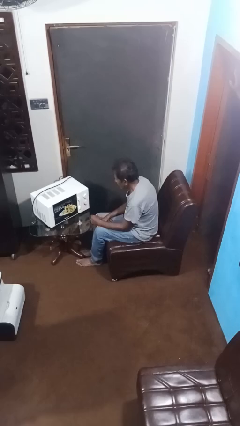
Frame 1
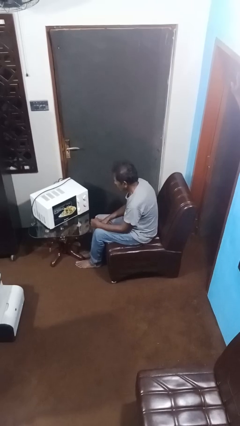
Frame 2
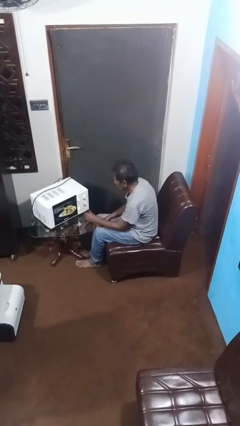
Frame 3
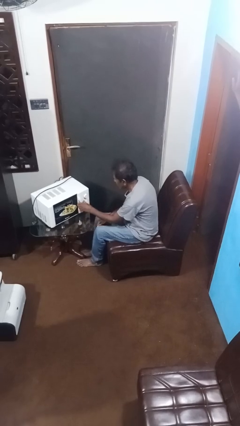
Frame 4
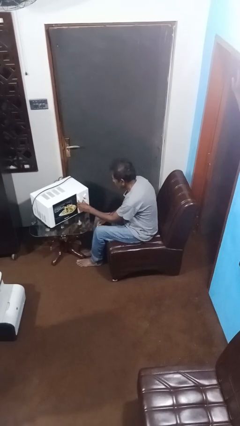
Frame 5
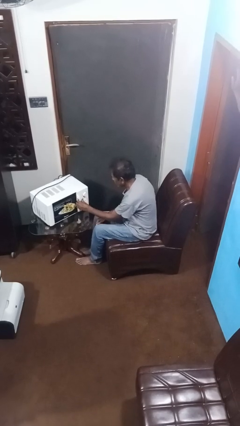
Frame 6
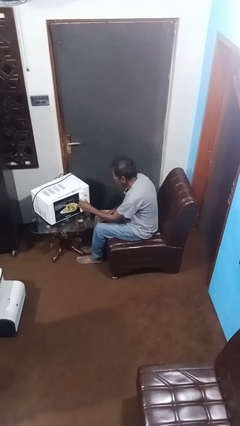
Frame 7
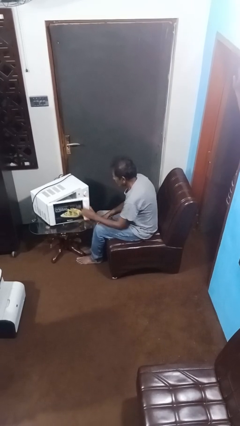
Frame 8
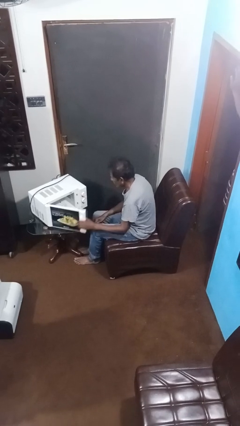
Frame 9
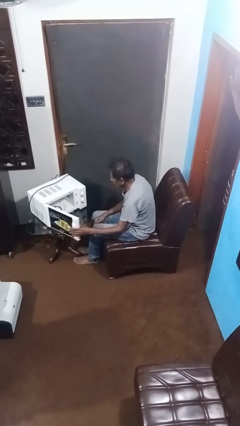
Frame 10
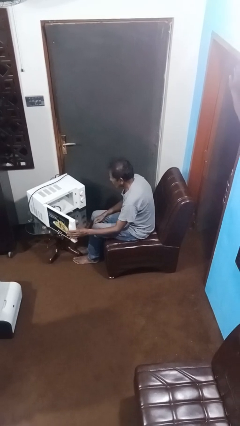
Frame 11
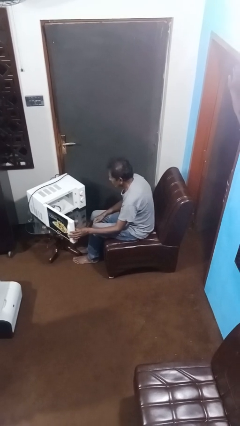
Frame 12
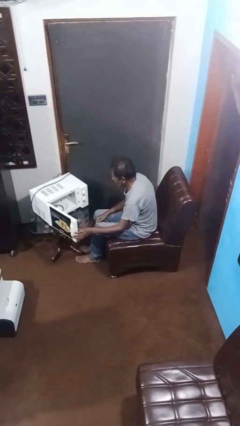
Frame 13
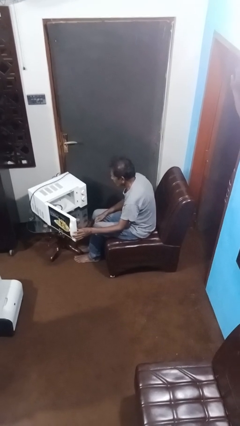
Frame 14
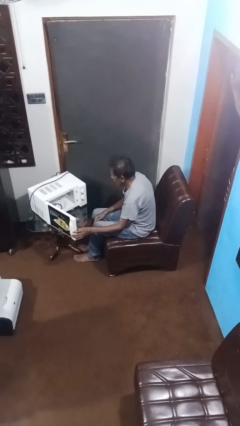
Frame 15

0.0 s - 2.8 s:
person opens microwave

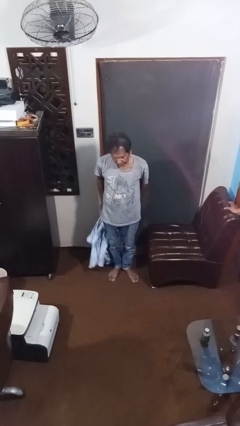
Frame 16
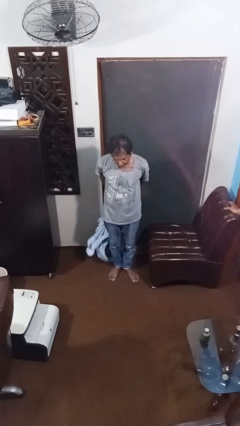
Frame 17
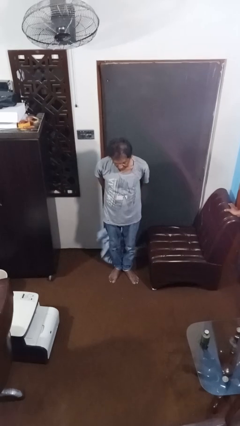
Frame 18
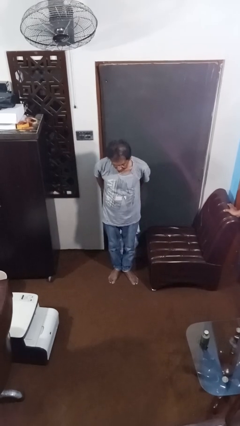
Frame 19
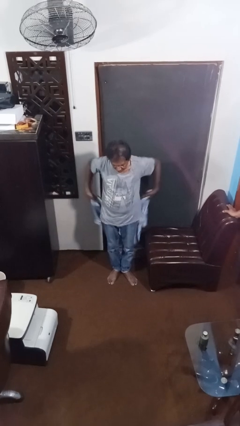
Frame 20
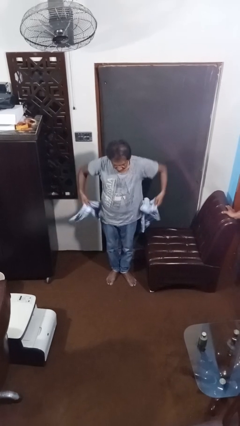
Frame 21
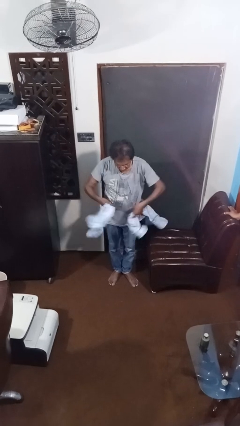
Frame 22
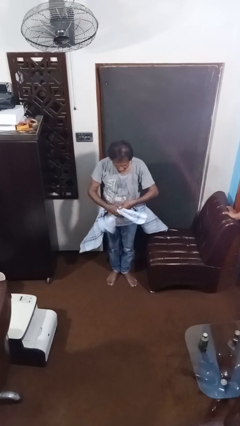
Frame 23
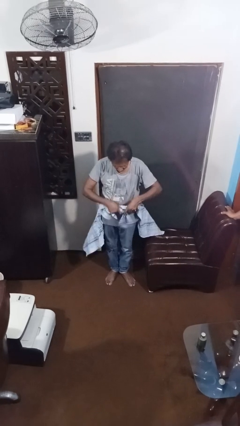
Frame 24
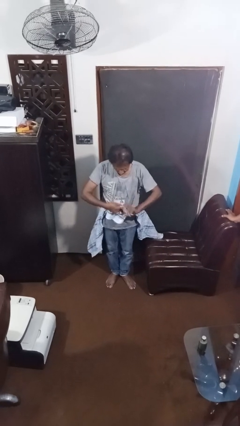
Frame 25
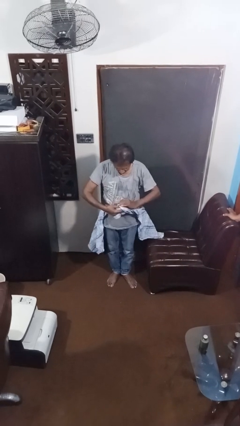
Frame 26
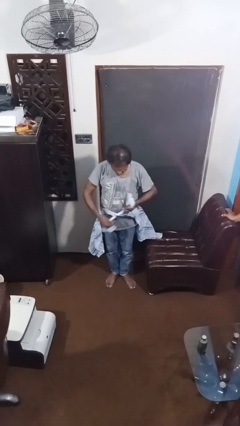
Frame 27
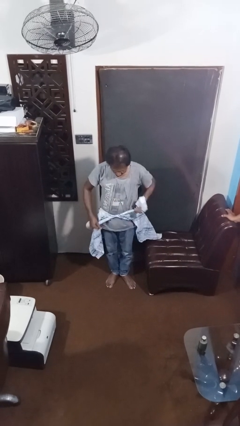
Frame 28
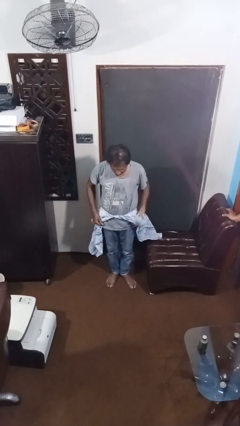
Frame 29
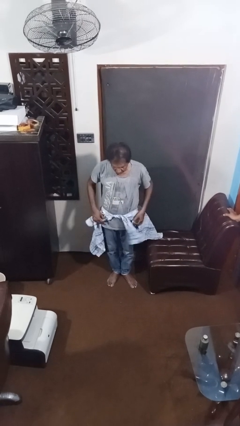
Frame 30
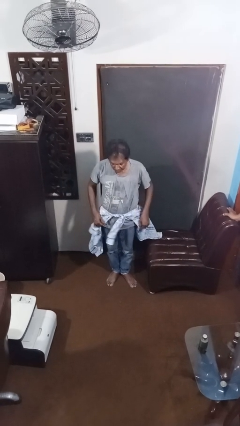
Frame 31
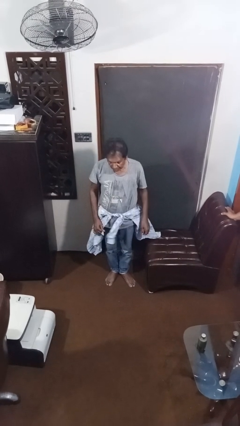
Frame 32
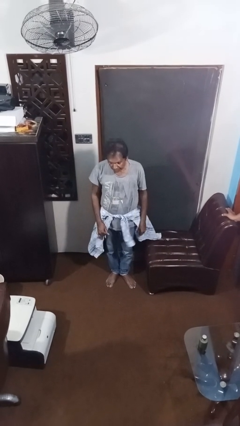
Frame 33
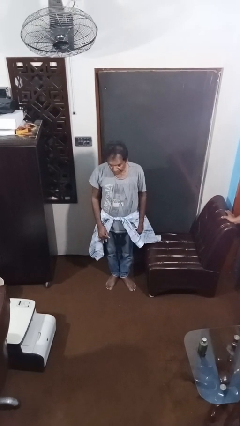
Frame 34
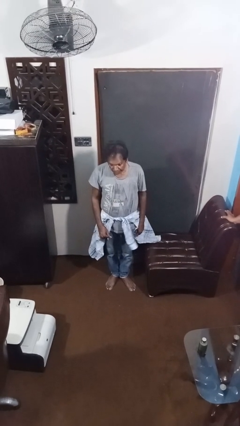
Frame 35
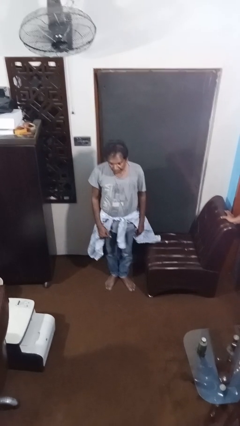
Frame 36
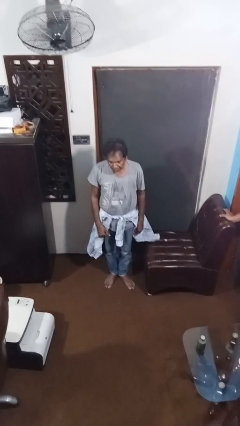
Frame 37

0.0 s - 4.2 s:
person ties jacket around waist

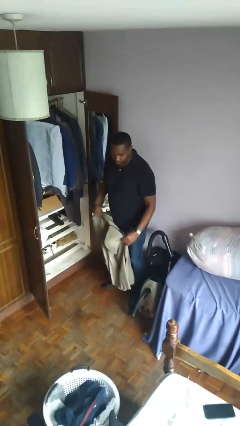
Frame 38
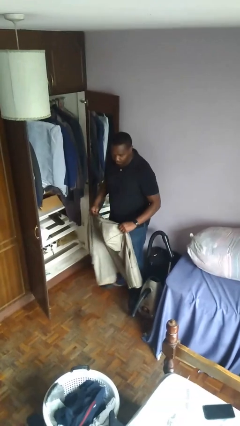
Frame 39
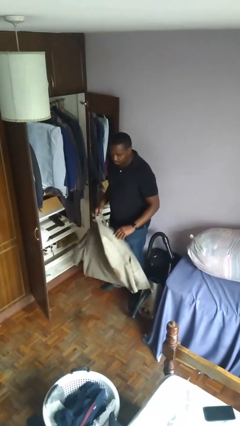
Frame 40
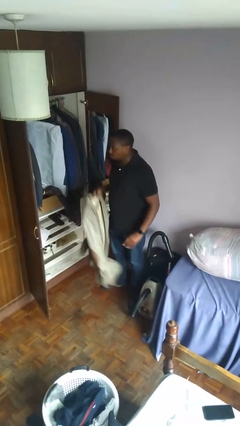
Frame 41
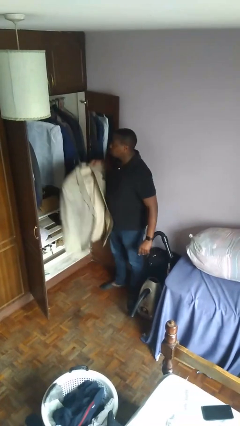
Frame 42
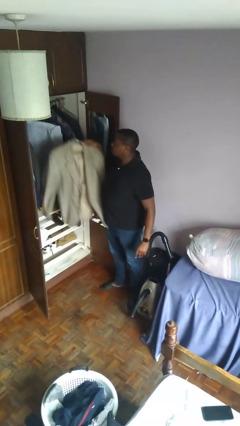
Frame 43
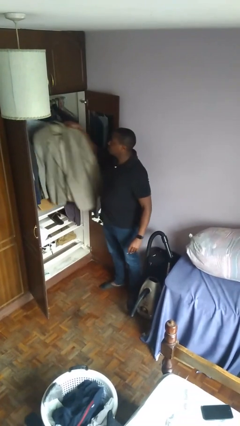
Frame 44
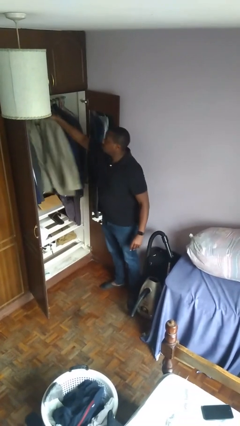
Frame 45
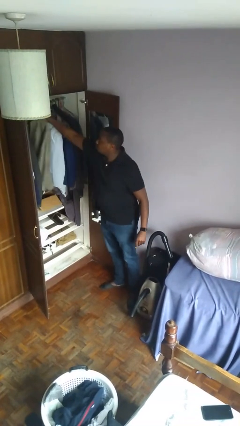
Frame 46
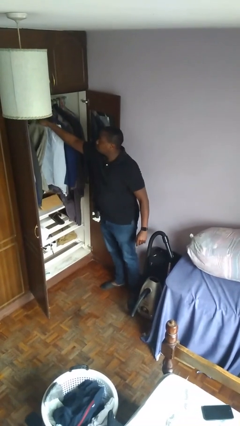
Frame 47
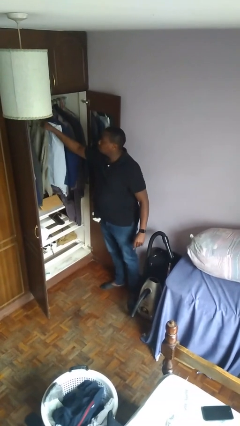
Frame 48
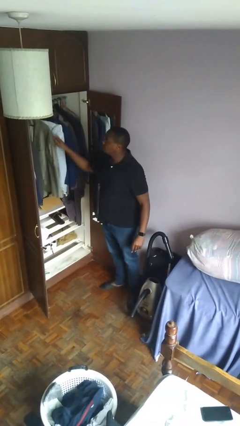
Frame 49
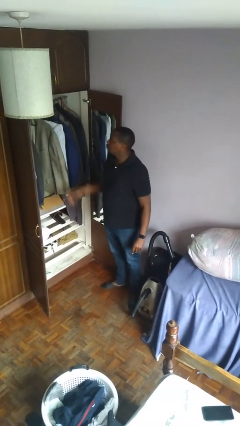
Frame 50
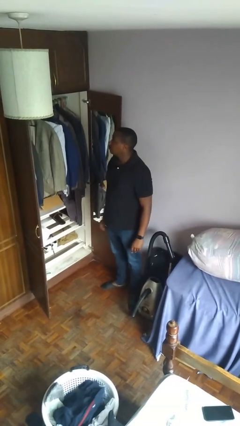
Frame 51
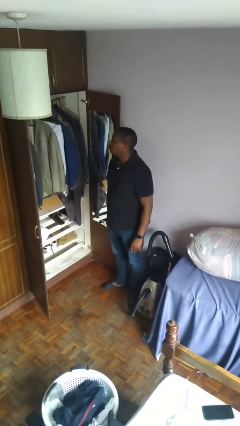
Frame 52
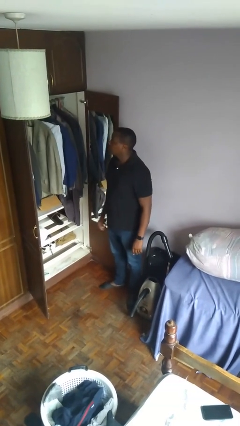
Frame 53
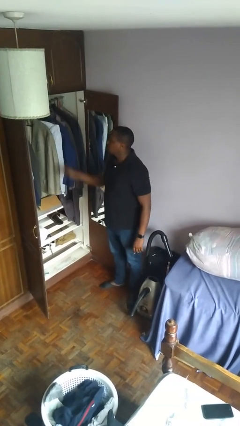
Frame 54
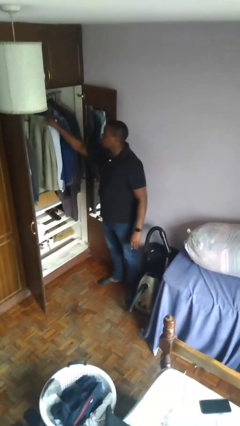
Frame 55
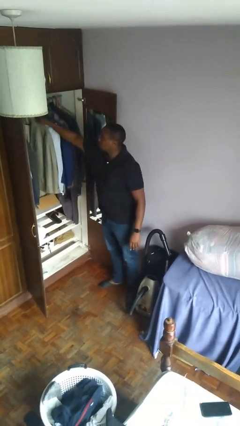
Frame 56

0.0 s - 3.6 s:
person puts clothes into closet

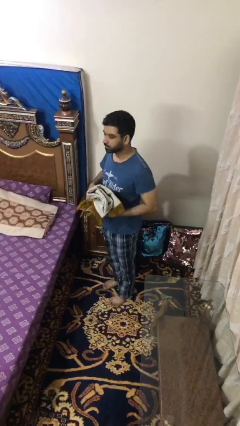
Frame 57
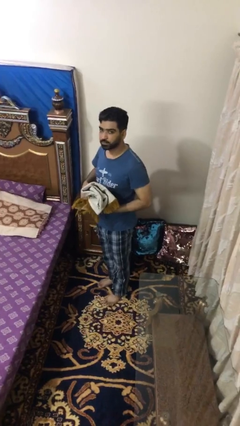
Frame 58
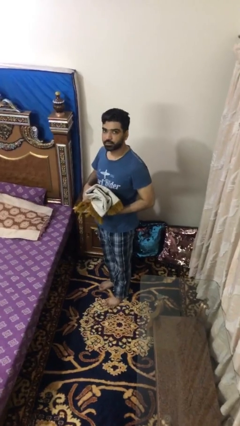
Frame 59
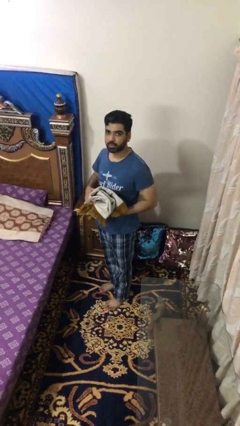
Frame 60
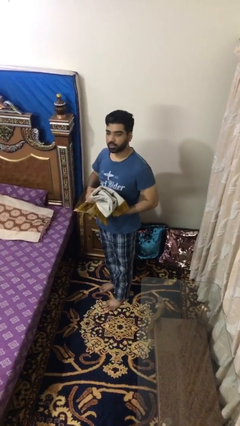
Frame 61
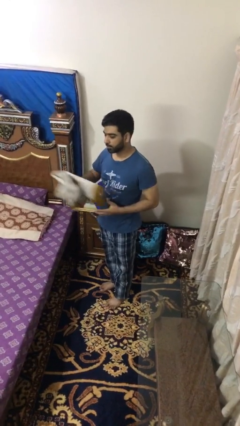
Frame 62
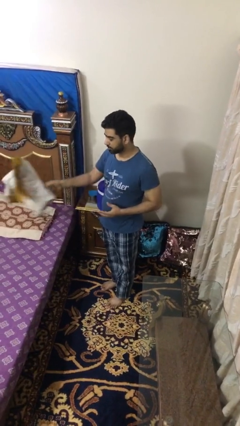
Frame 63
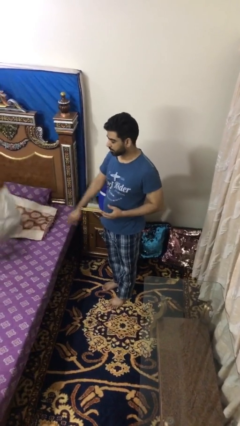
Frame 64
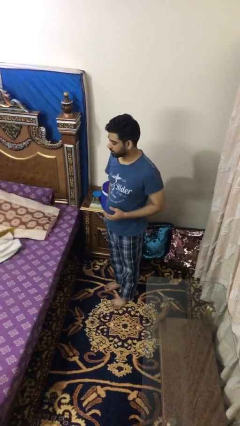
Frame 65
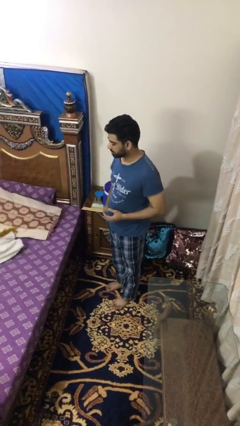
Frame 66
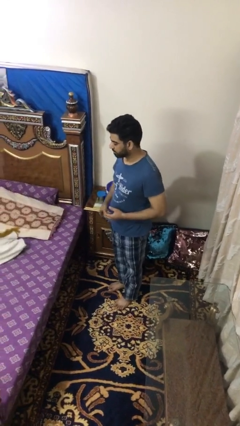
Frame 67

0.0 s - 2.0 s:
person throws object on bed

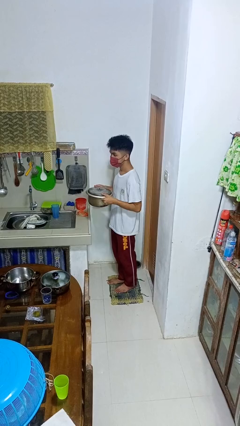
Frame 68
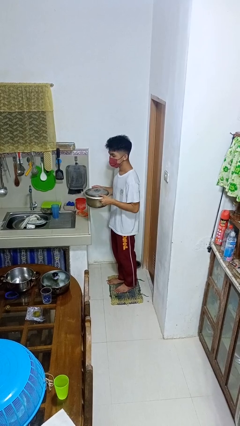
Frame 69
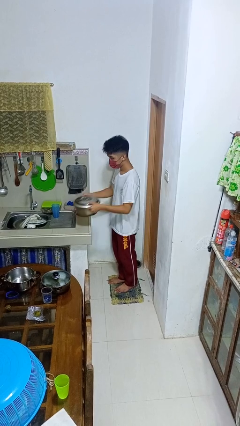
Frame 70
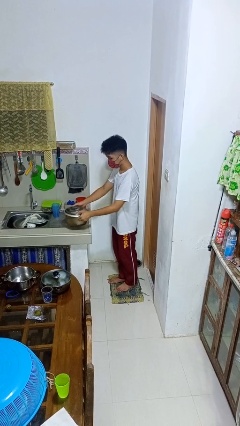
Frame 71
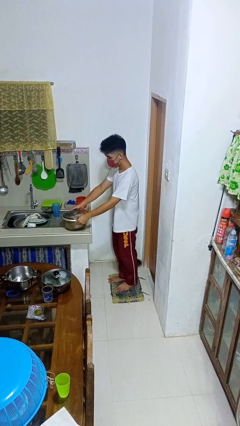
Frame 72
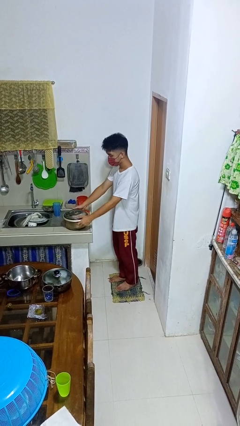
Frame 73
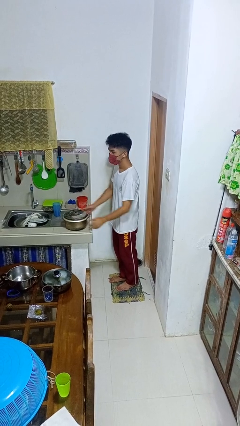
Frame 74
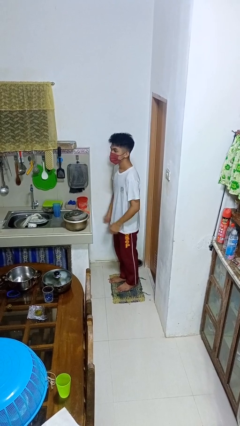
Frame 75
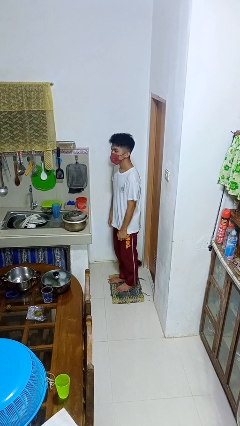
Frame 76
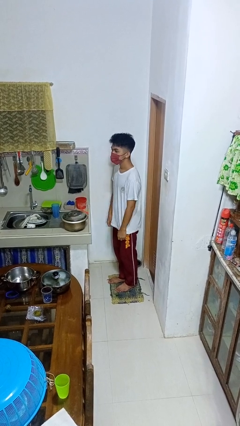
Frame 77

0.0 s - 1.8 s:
person puts down object on countertop

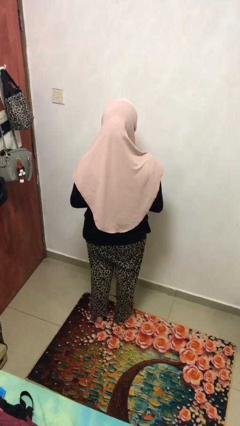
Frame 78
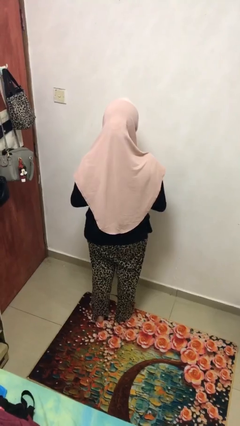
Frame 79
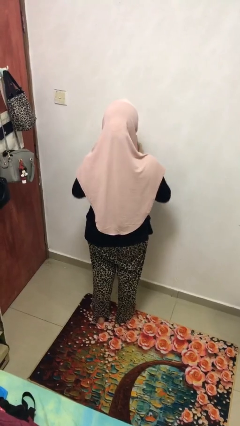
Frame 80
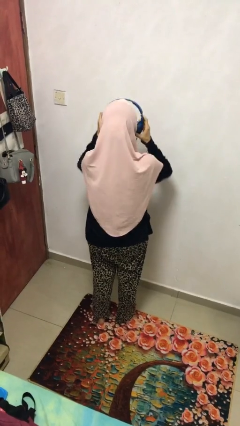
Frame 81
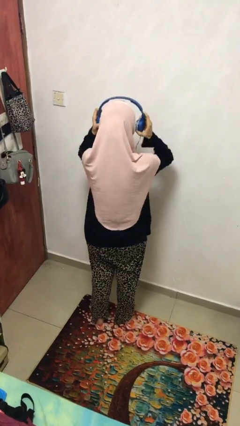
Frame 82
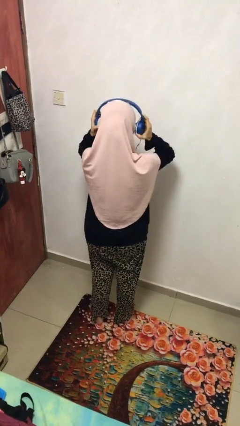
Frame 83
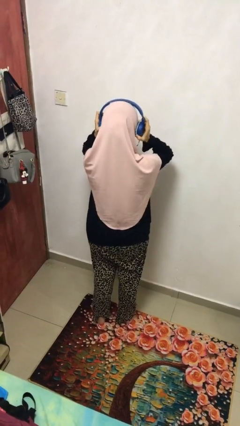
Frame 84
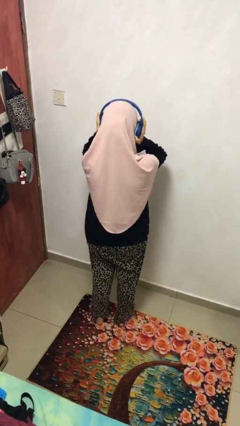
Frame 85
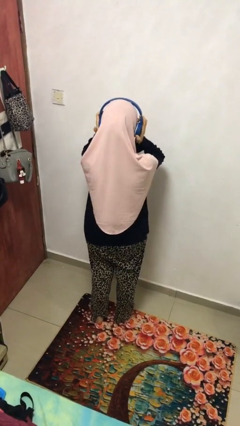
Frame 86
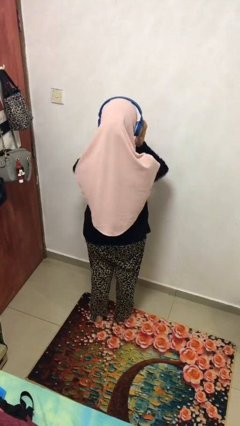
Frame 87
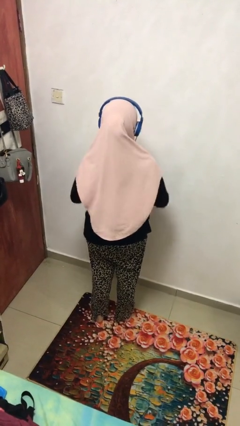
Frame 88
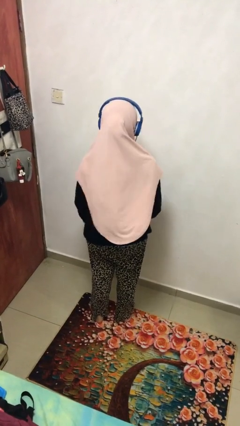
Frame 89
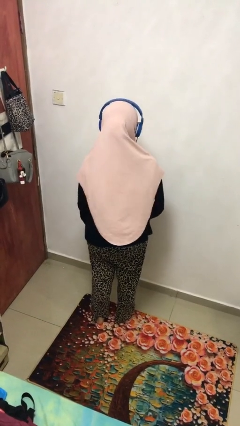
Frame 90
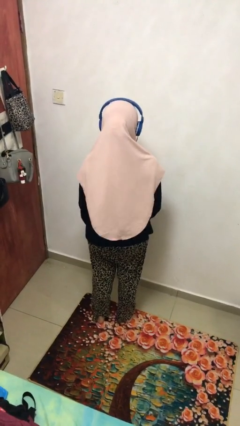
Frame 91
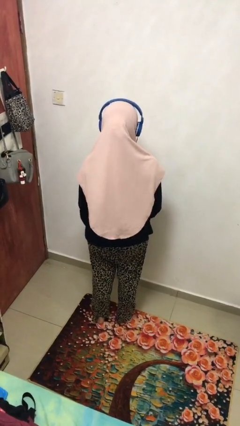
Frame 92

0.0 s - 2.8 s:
person puts on headphones

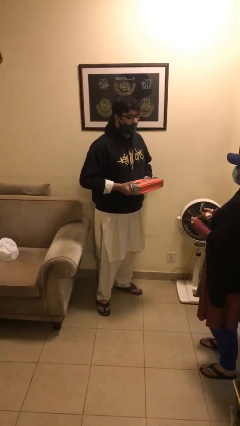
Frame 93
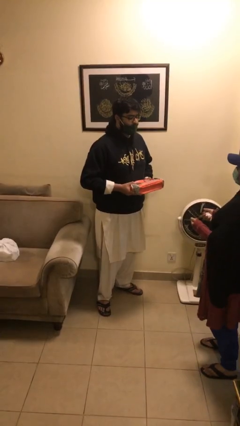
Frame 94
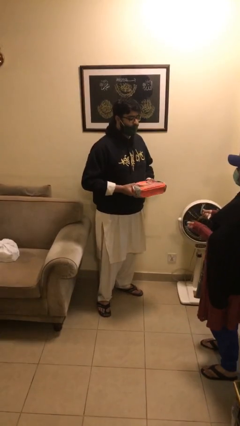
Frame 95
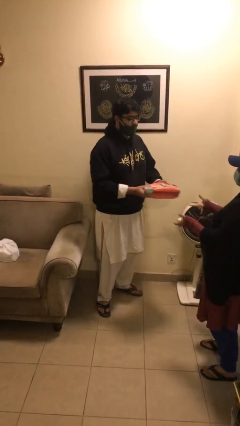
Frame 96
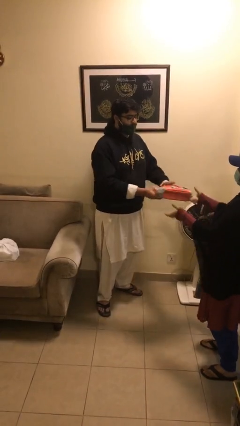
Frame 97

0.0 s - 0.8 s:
person transfers object to person
